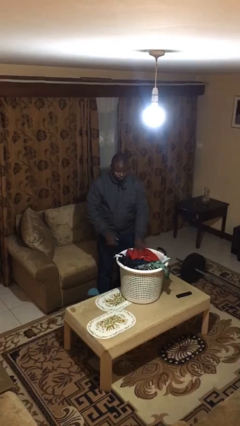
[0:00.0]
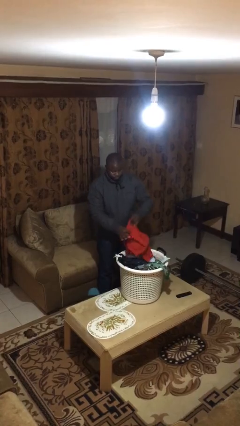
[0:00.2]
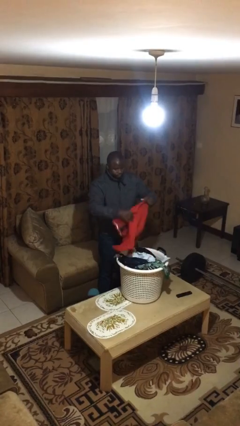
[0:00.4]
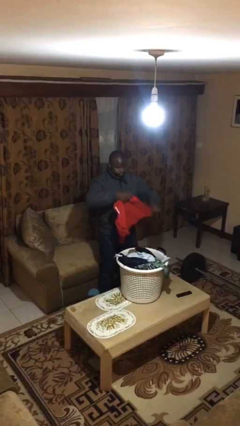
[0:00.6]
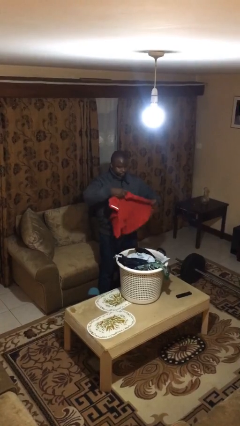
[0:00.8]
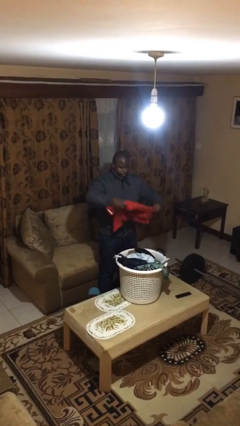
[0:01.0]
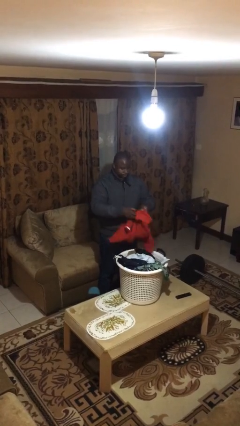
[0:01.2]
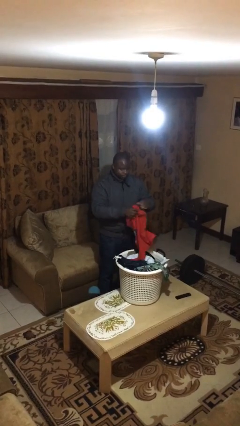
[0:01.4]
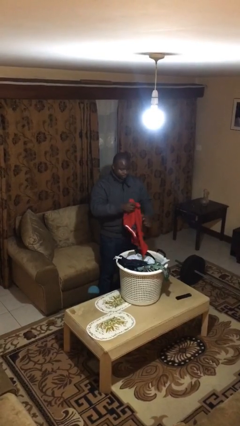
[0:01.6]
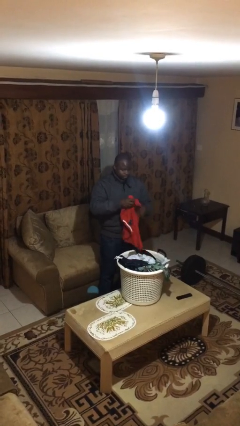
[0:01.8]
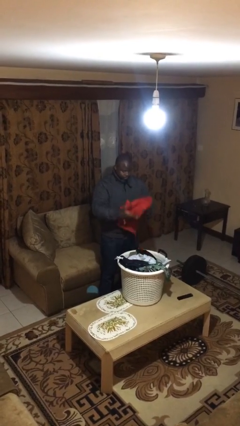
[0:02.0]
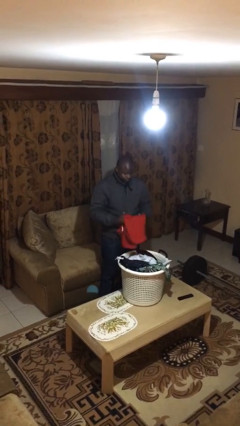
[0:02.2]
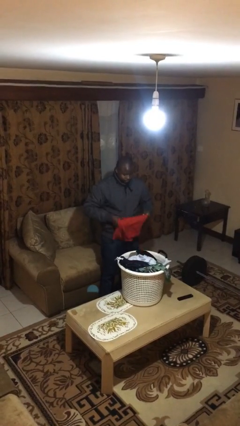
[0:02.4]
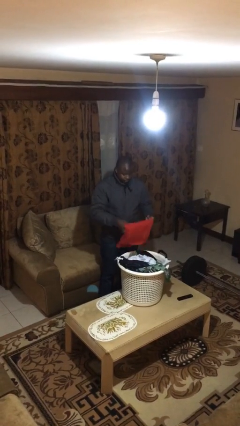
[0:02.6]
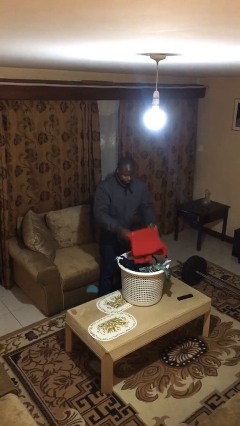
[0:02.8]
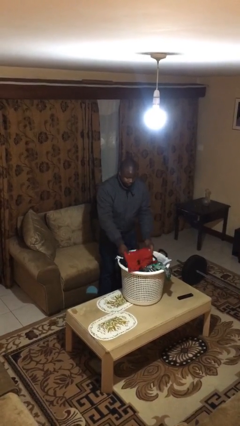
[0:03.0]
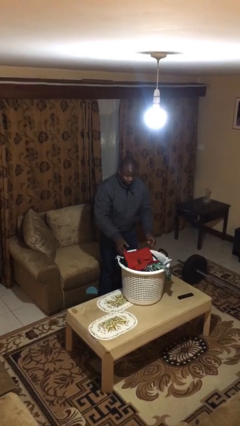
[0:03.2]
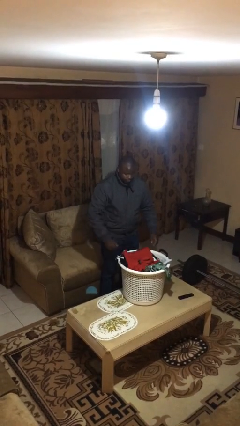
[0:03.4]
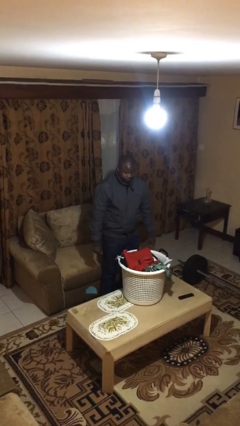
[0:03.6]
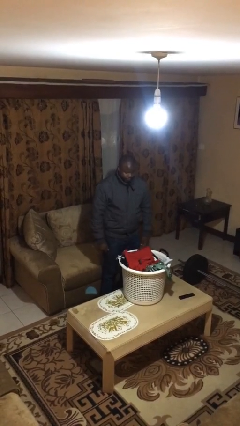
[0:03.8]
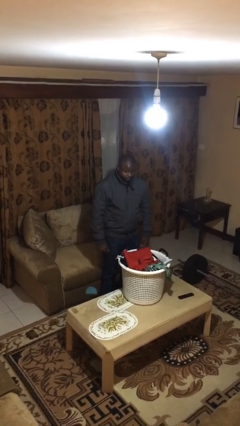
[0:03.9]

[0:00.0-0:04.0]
person folds shirt

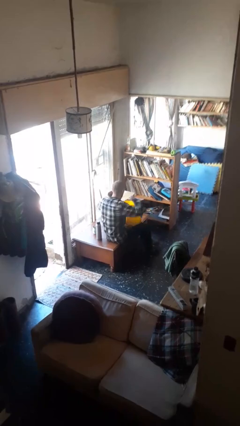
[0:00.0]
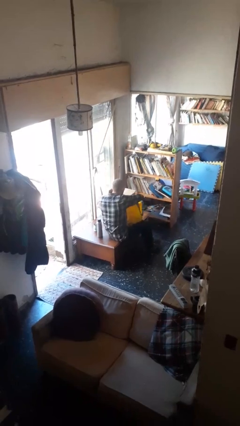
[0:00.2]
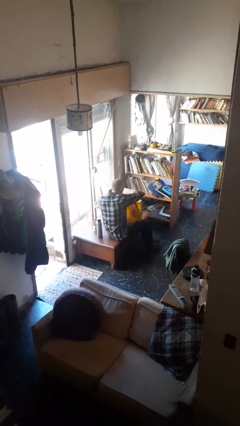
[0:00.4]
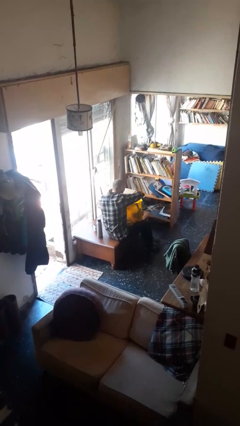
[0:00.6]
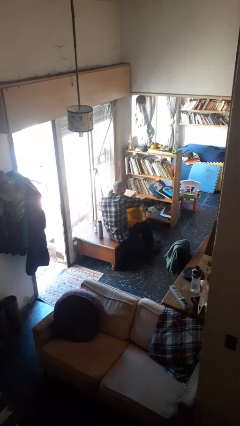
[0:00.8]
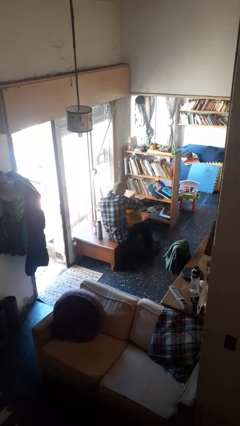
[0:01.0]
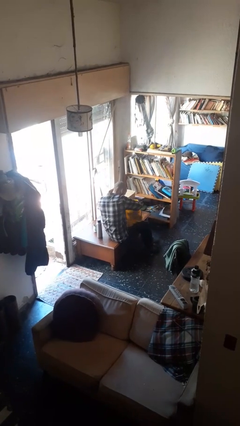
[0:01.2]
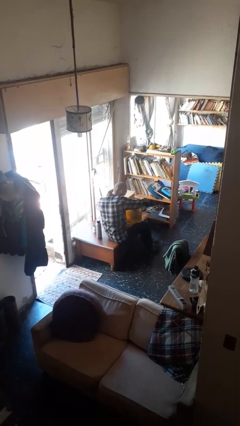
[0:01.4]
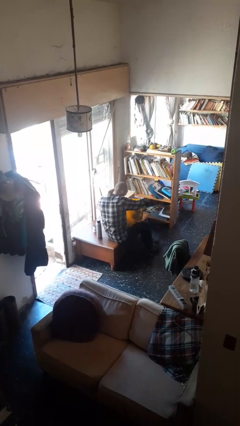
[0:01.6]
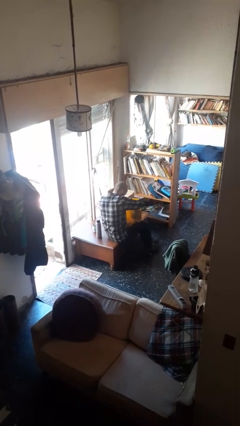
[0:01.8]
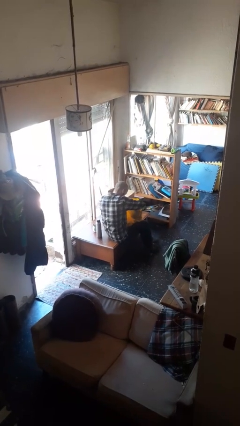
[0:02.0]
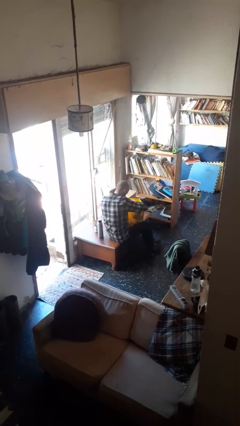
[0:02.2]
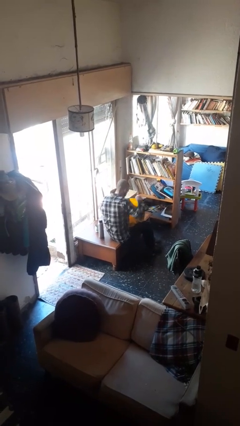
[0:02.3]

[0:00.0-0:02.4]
person searches in bag

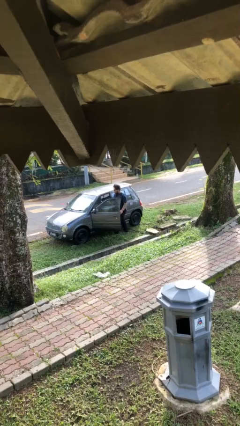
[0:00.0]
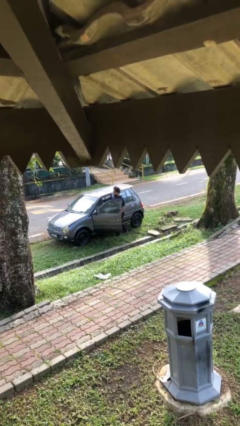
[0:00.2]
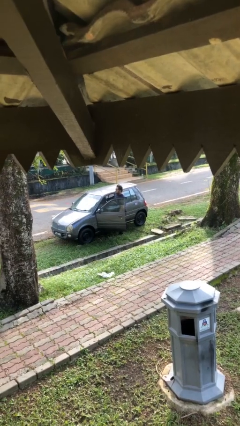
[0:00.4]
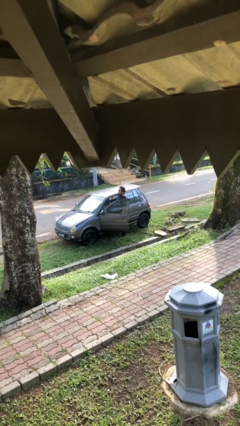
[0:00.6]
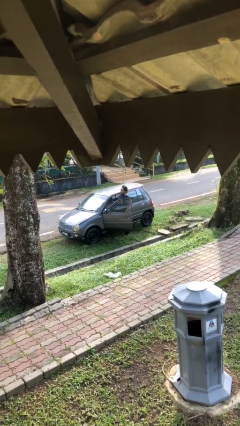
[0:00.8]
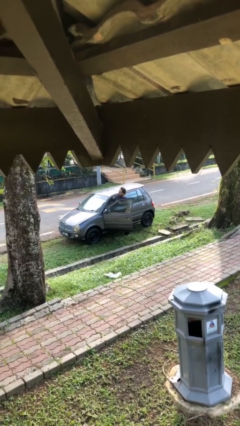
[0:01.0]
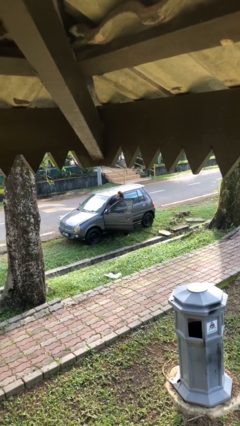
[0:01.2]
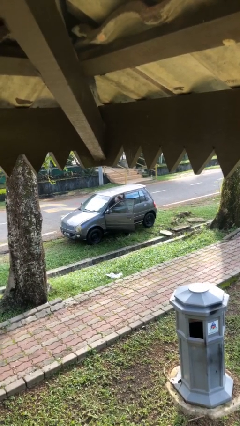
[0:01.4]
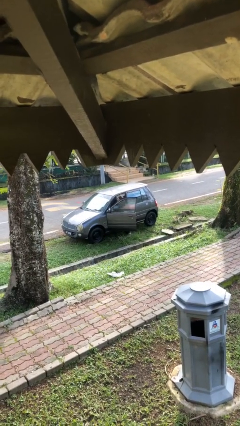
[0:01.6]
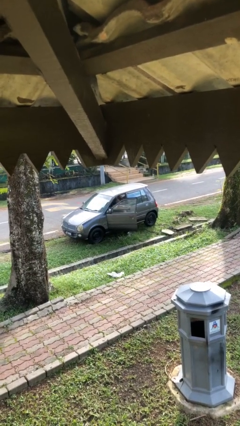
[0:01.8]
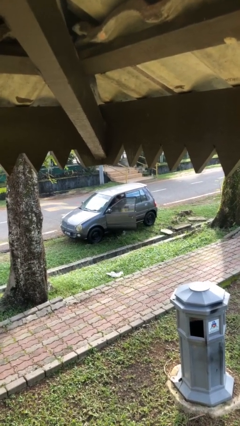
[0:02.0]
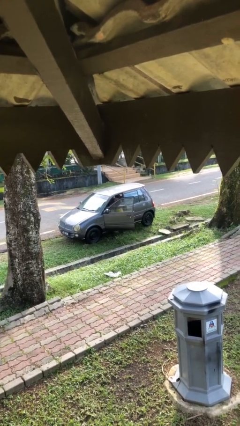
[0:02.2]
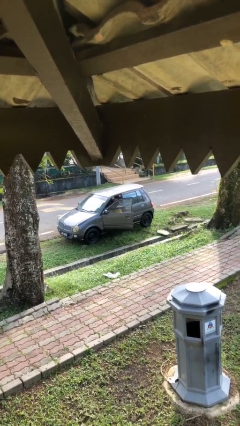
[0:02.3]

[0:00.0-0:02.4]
person enters car

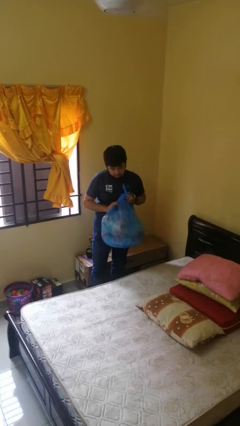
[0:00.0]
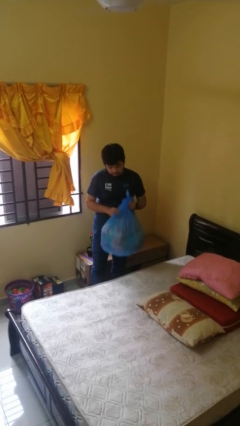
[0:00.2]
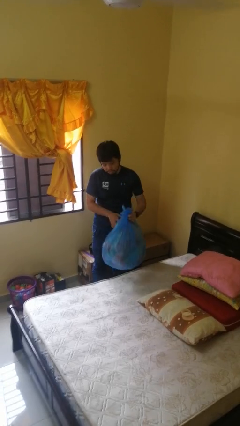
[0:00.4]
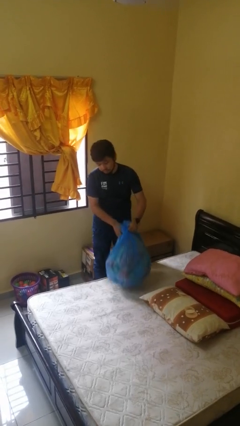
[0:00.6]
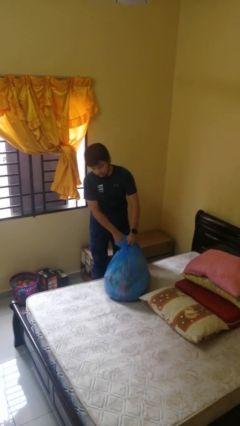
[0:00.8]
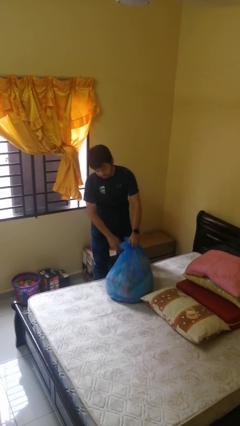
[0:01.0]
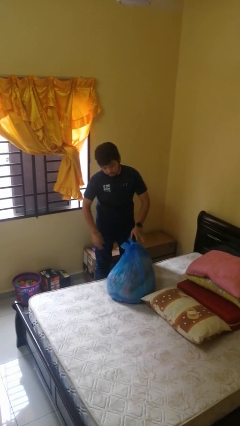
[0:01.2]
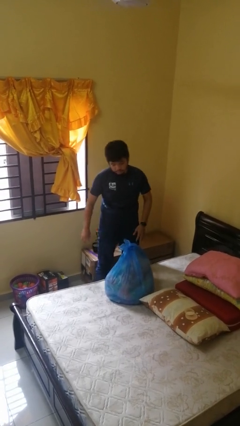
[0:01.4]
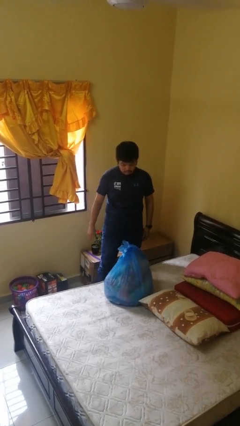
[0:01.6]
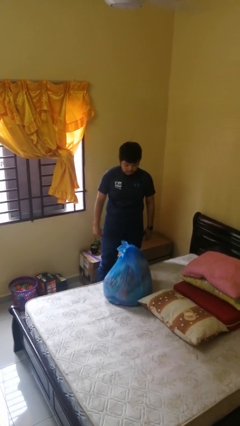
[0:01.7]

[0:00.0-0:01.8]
person puts down object on bed

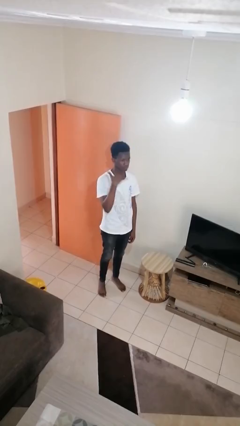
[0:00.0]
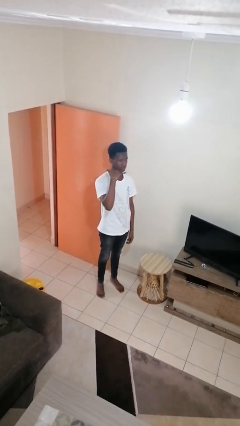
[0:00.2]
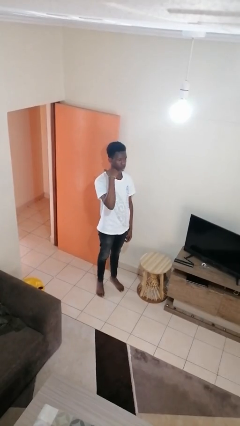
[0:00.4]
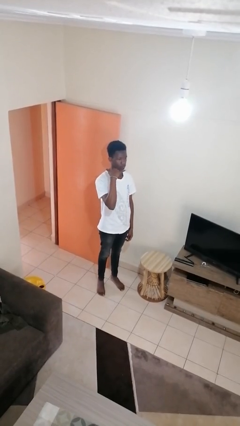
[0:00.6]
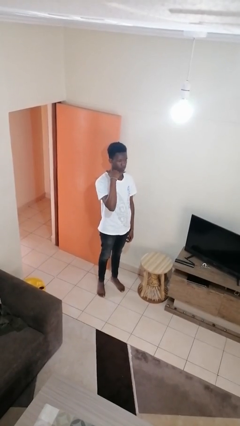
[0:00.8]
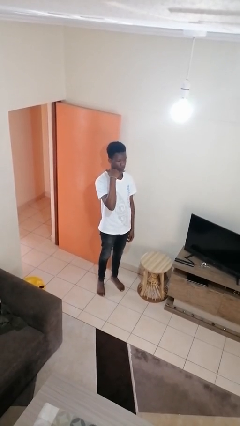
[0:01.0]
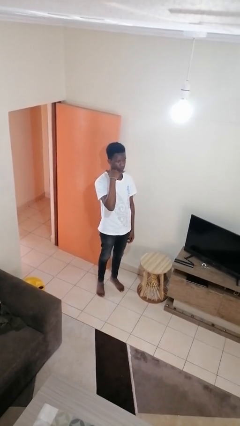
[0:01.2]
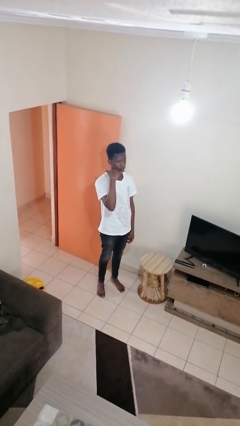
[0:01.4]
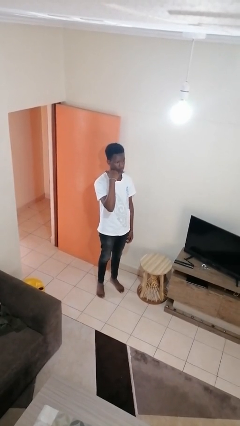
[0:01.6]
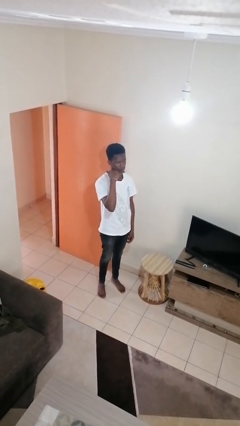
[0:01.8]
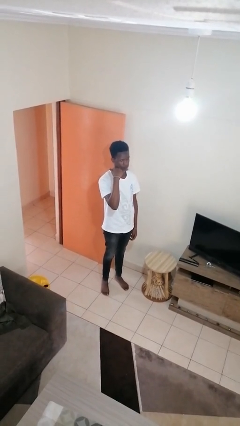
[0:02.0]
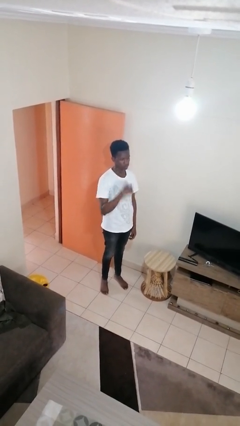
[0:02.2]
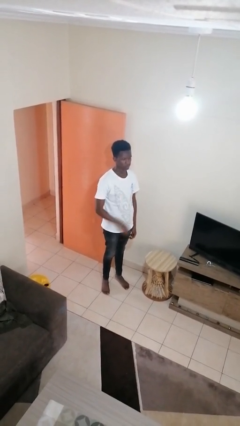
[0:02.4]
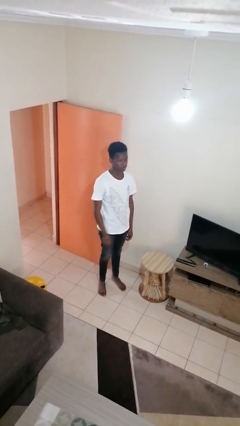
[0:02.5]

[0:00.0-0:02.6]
person gestures call me

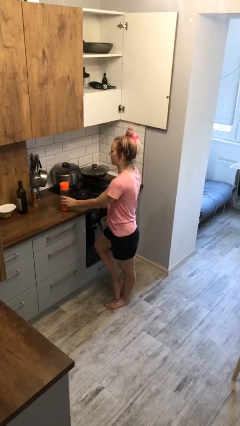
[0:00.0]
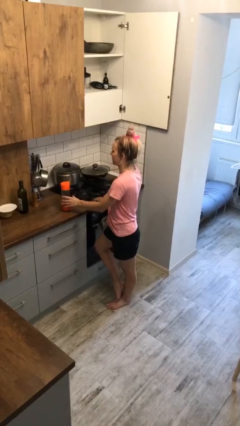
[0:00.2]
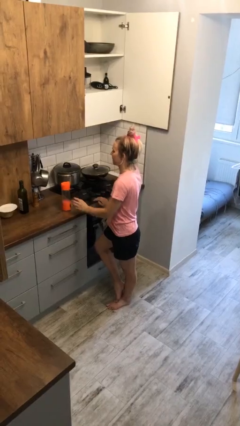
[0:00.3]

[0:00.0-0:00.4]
person puts down object on countertop

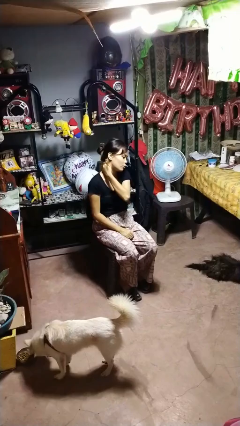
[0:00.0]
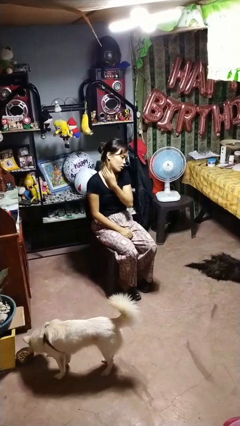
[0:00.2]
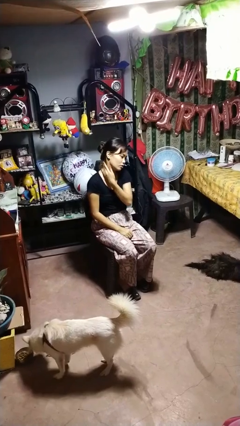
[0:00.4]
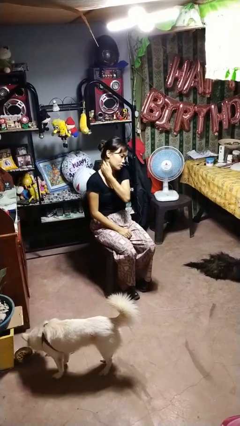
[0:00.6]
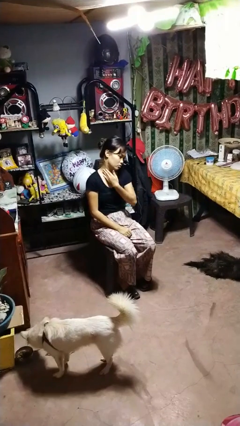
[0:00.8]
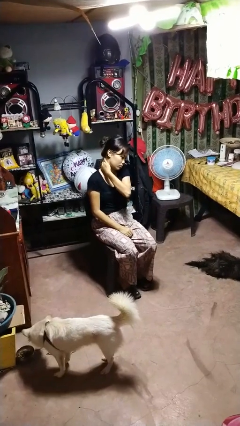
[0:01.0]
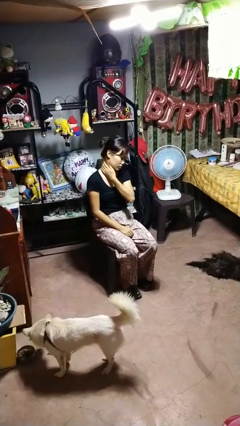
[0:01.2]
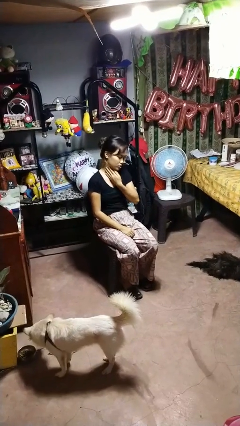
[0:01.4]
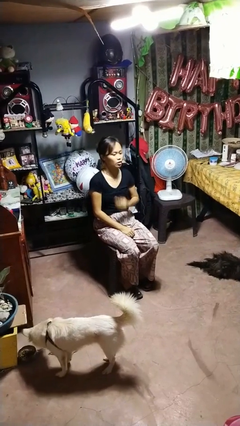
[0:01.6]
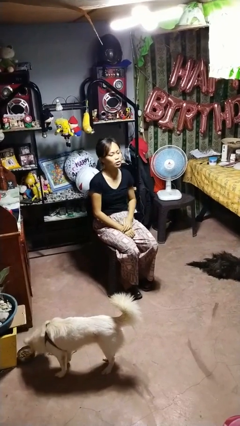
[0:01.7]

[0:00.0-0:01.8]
person rubs neck

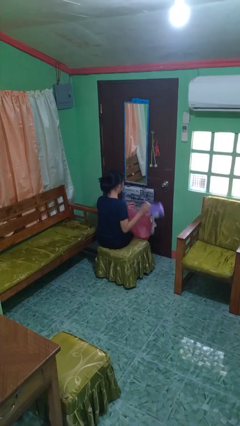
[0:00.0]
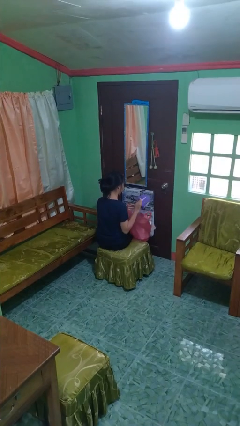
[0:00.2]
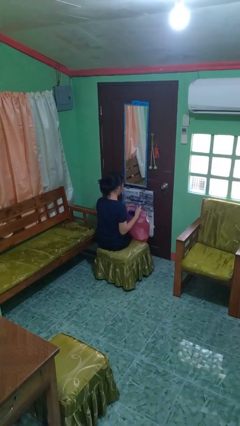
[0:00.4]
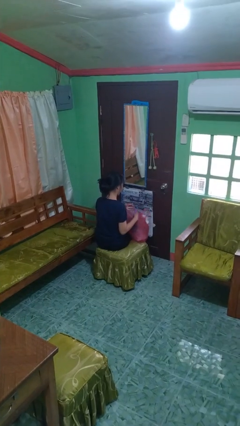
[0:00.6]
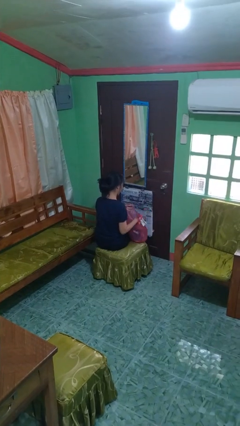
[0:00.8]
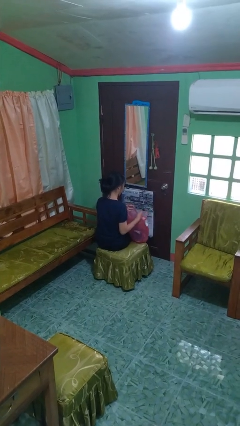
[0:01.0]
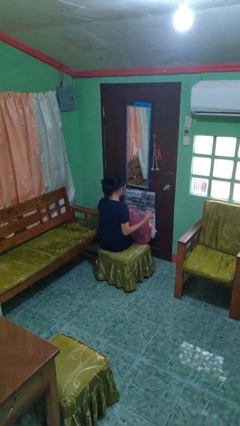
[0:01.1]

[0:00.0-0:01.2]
person puts object into bag

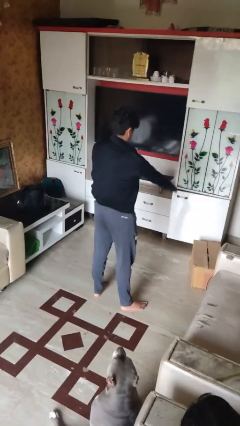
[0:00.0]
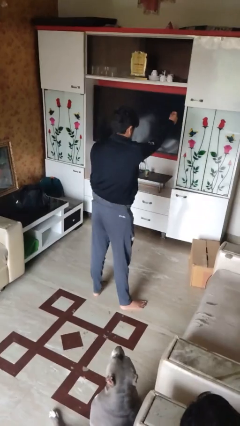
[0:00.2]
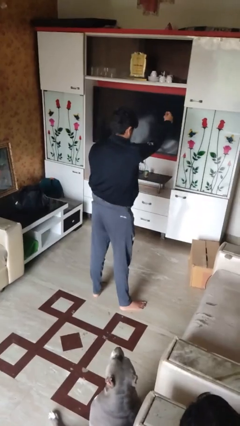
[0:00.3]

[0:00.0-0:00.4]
person puts on jacket
